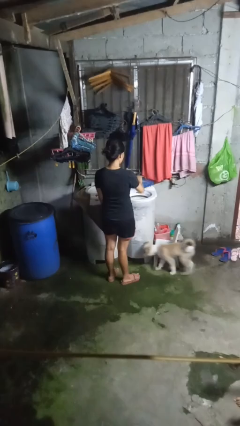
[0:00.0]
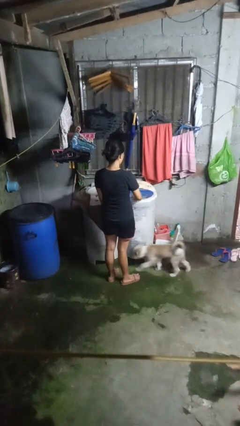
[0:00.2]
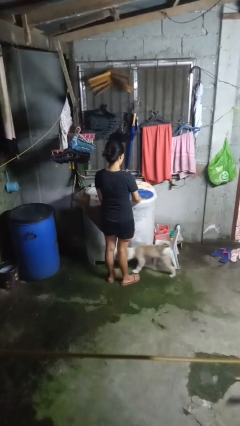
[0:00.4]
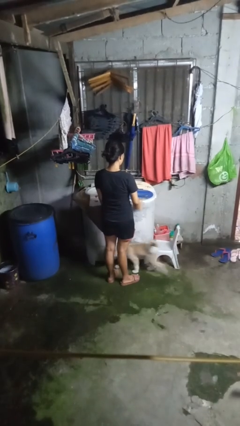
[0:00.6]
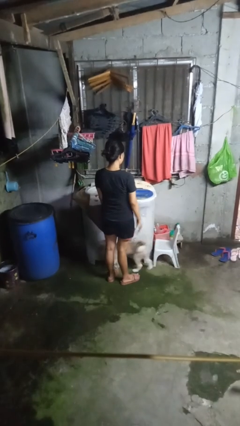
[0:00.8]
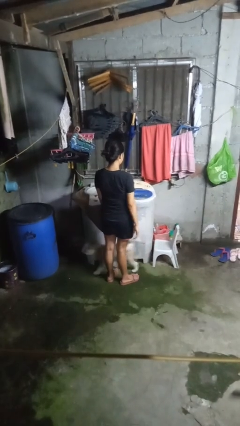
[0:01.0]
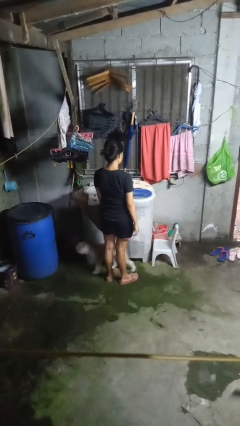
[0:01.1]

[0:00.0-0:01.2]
person closes clothes washer

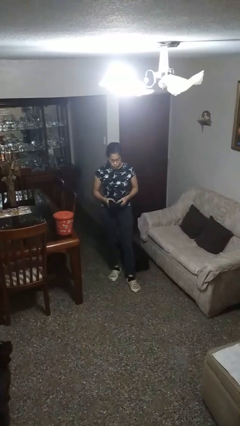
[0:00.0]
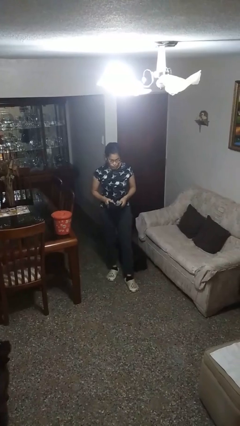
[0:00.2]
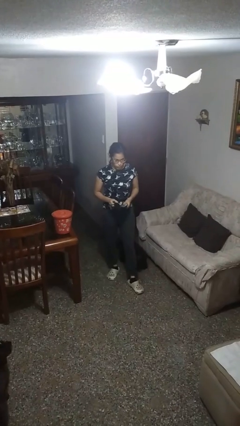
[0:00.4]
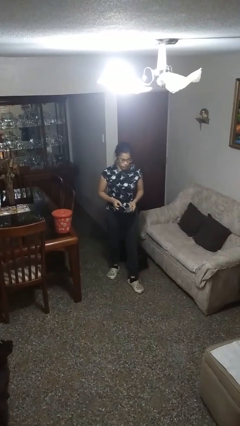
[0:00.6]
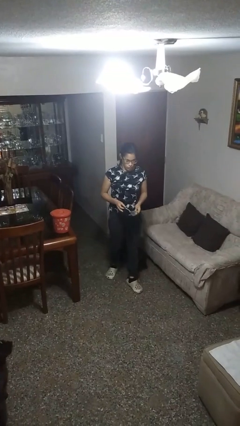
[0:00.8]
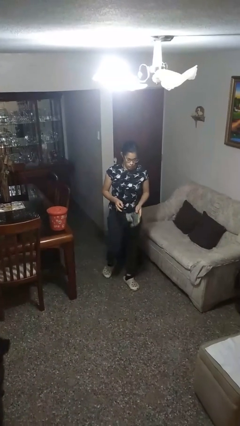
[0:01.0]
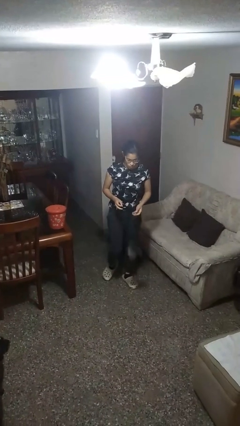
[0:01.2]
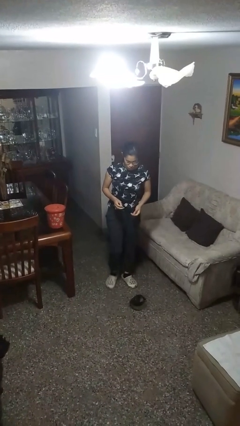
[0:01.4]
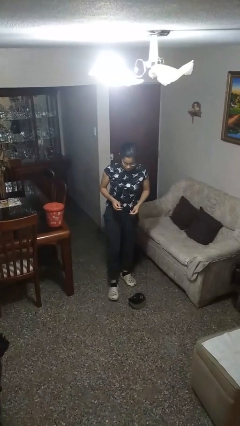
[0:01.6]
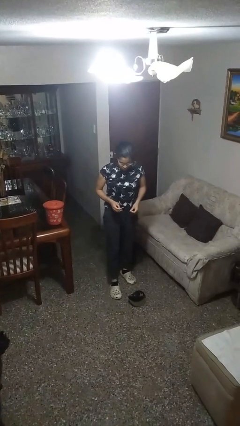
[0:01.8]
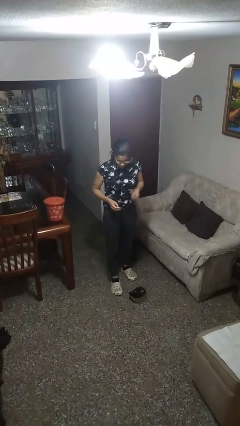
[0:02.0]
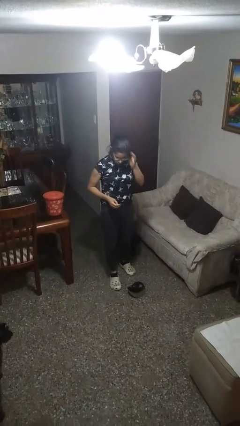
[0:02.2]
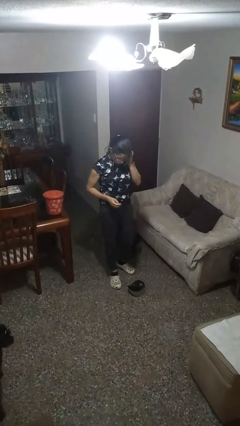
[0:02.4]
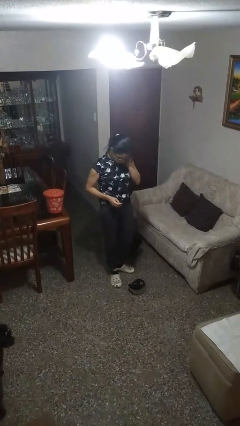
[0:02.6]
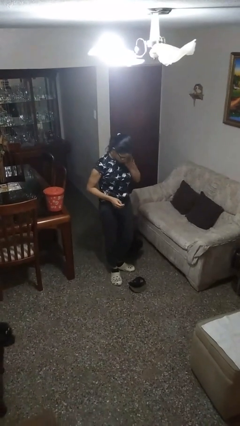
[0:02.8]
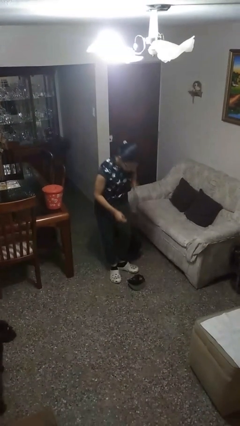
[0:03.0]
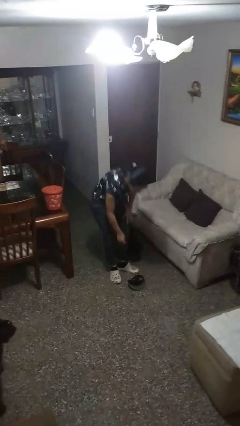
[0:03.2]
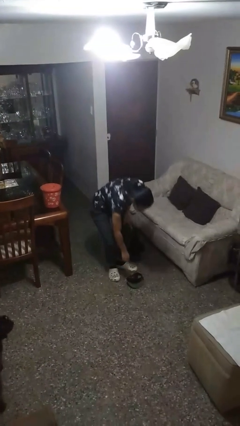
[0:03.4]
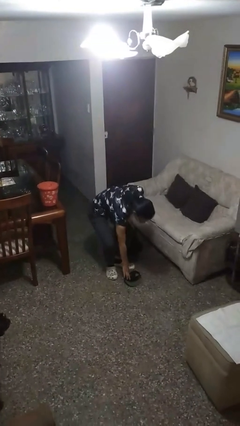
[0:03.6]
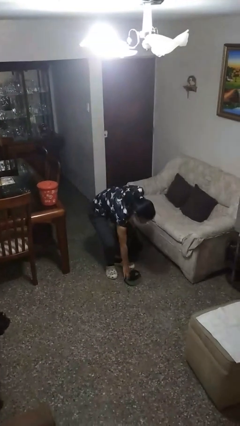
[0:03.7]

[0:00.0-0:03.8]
person drops object

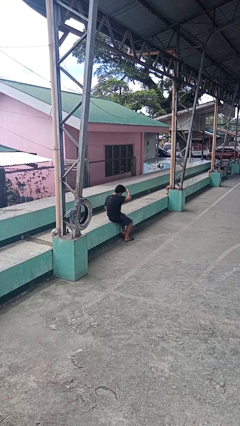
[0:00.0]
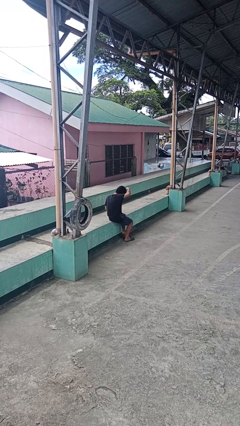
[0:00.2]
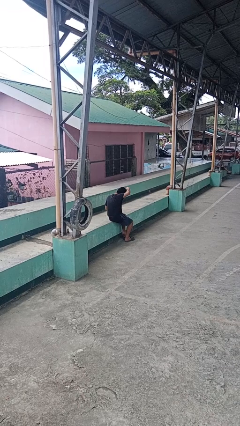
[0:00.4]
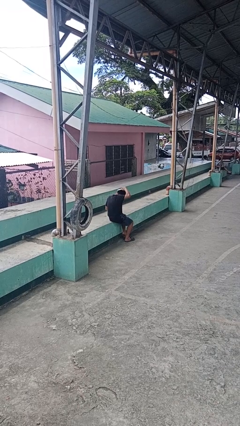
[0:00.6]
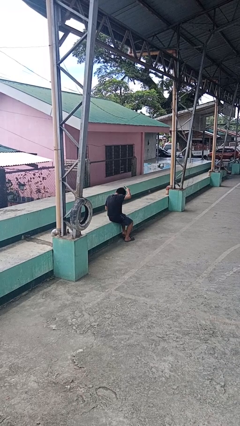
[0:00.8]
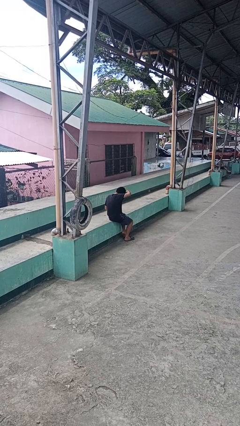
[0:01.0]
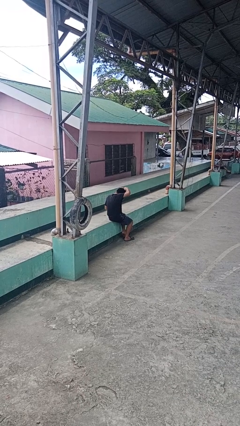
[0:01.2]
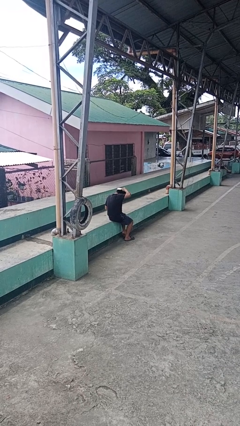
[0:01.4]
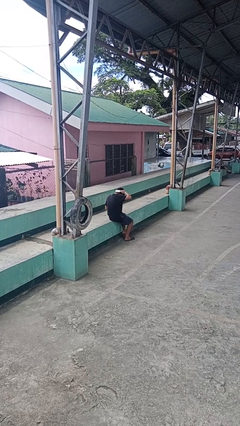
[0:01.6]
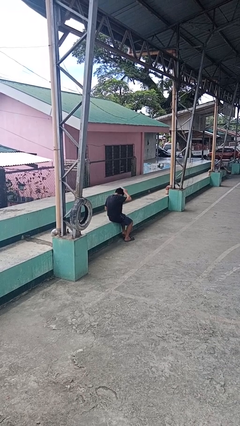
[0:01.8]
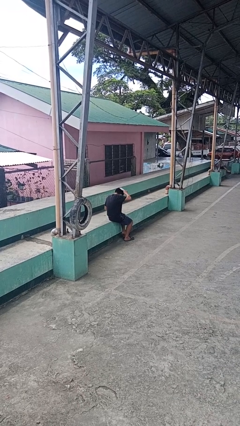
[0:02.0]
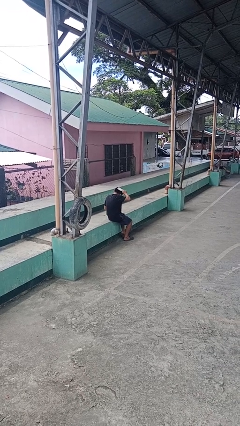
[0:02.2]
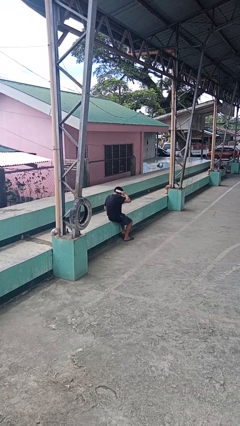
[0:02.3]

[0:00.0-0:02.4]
person brushes hair

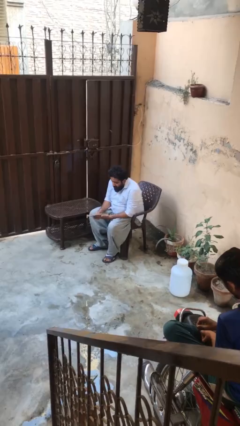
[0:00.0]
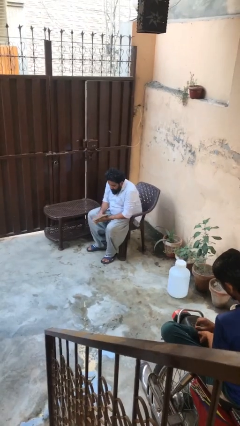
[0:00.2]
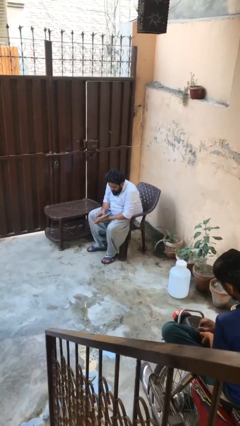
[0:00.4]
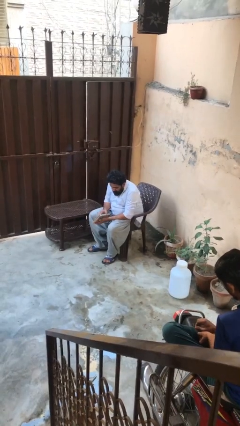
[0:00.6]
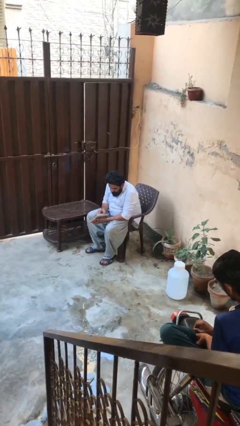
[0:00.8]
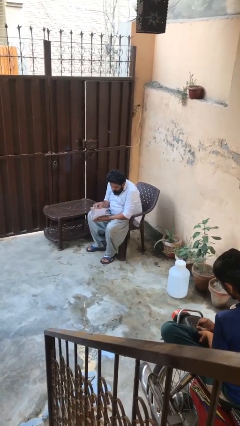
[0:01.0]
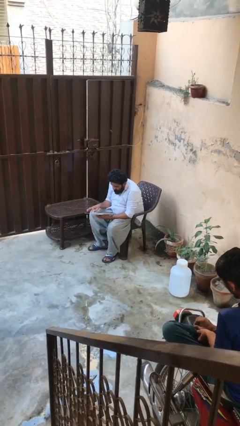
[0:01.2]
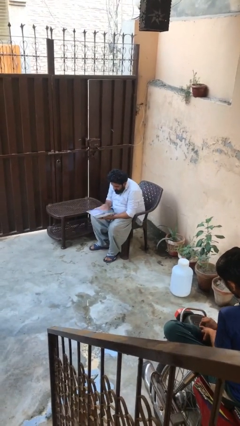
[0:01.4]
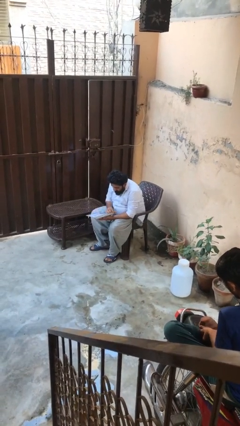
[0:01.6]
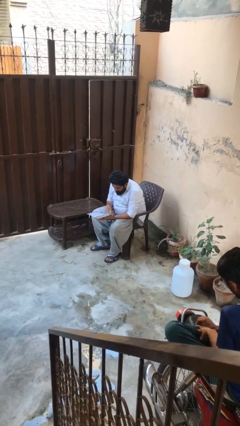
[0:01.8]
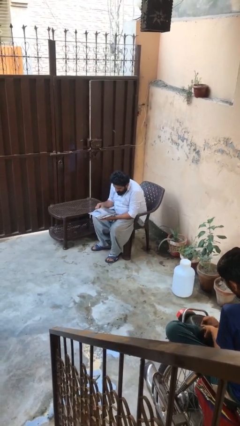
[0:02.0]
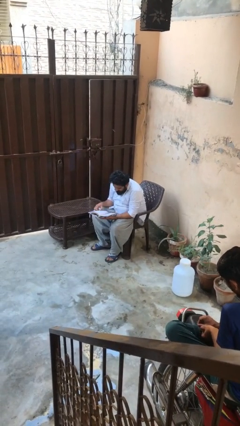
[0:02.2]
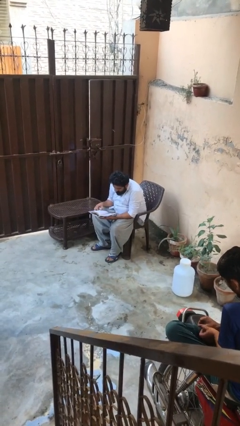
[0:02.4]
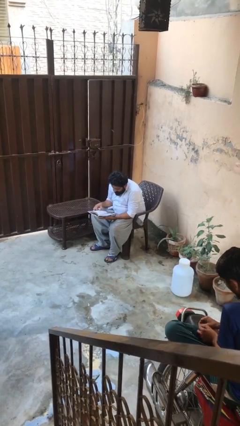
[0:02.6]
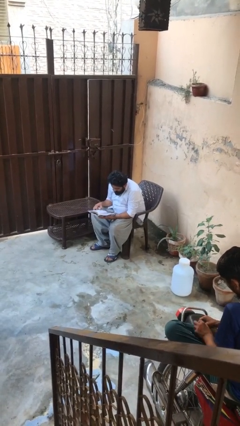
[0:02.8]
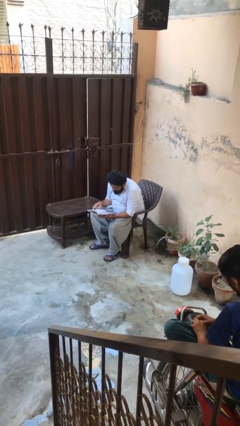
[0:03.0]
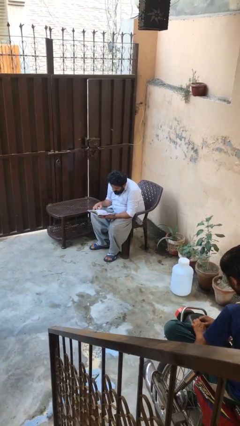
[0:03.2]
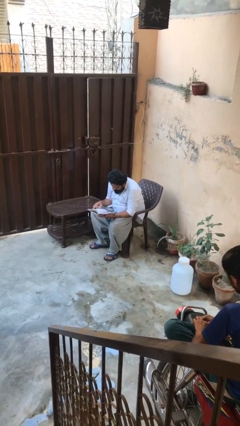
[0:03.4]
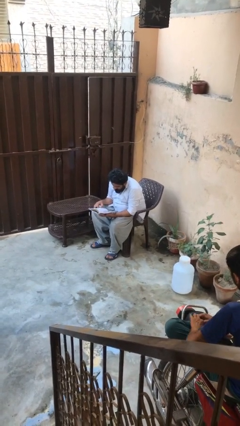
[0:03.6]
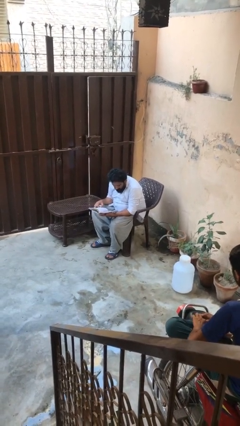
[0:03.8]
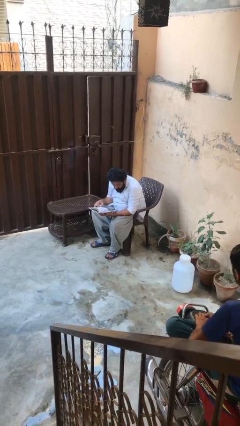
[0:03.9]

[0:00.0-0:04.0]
person reads document

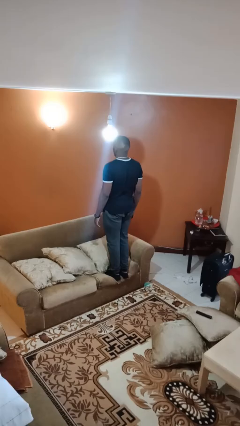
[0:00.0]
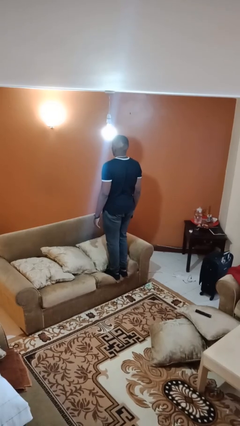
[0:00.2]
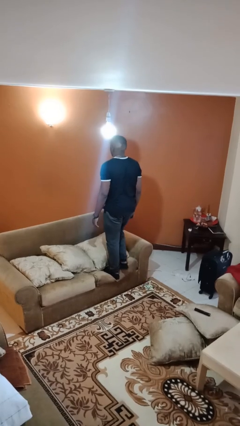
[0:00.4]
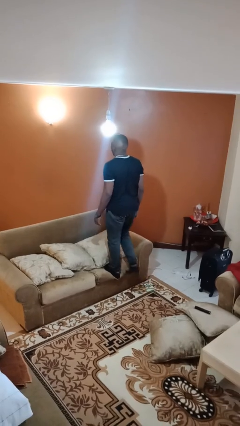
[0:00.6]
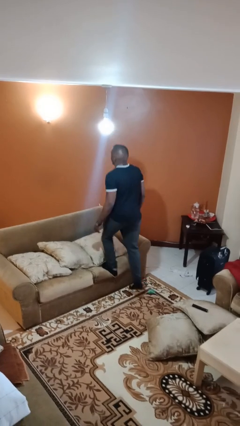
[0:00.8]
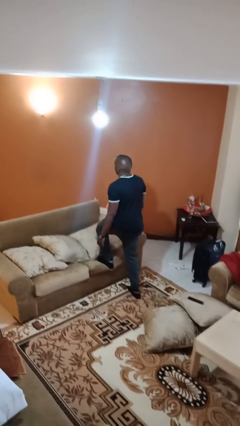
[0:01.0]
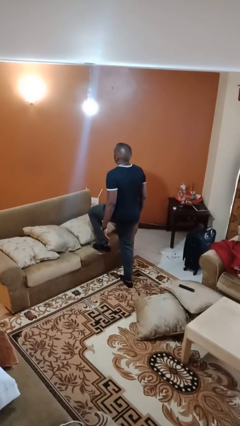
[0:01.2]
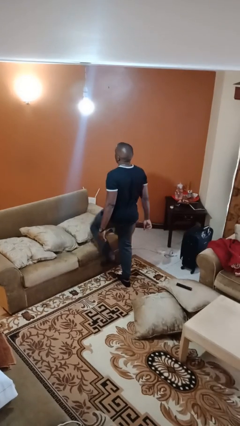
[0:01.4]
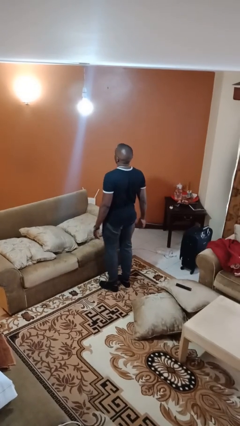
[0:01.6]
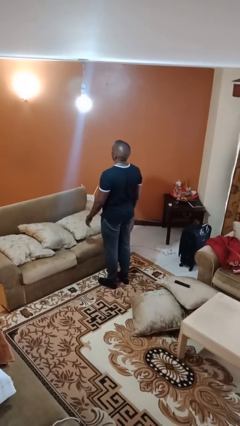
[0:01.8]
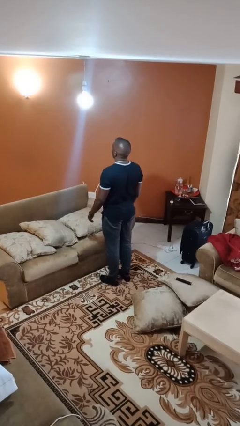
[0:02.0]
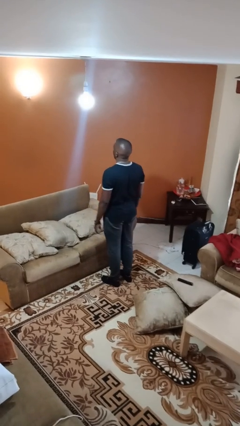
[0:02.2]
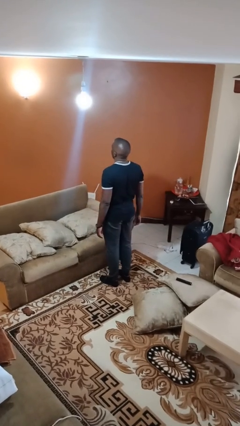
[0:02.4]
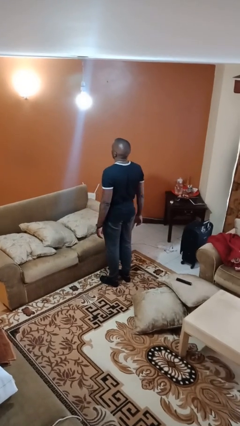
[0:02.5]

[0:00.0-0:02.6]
person climbs off couch

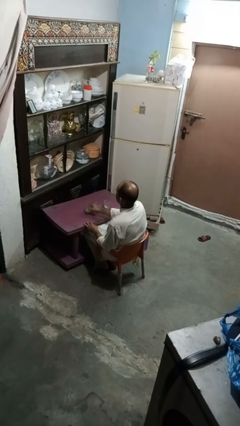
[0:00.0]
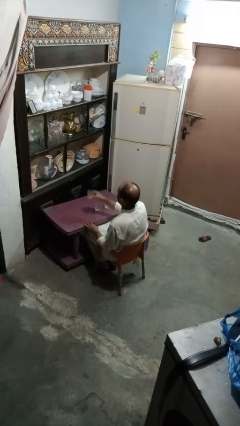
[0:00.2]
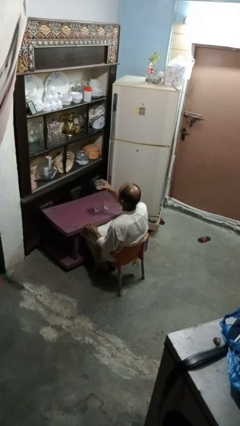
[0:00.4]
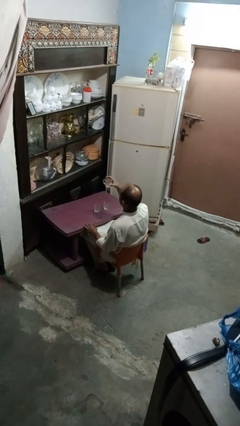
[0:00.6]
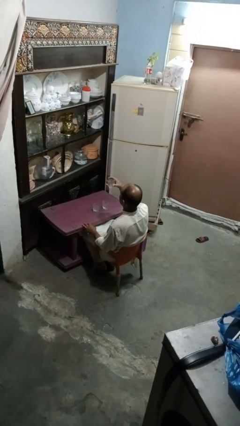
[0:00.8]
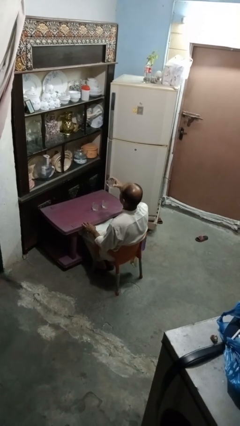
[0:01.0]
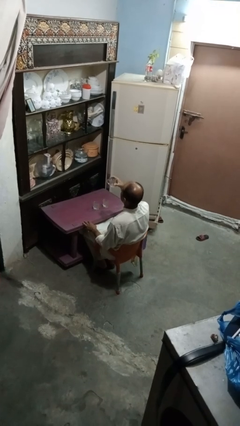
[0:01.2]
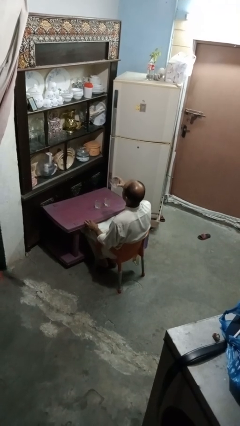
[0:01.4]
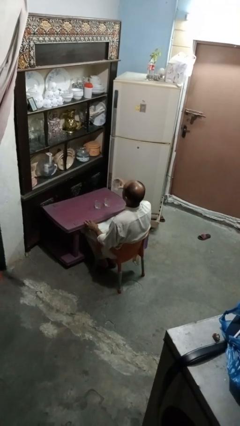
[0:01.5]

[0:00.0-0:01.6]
person picks up object from table

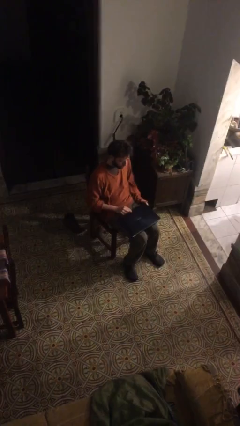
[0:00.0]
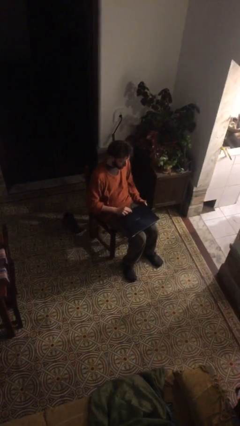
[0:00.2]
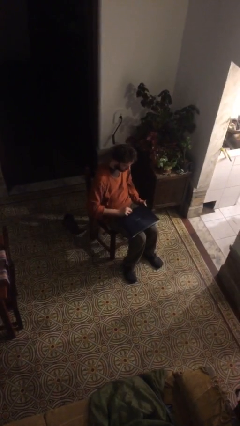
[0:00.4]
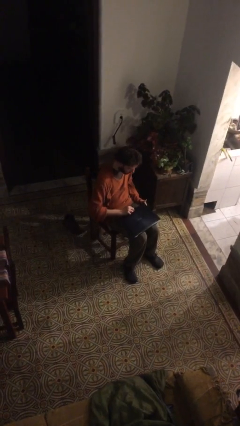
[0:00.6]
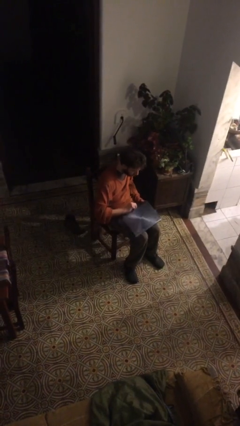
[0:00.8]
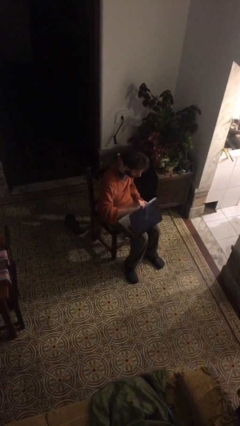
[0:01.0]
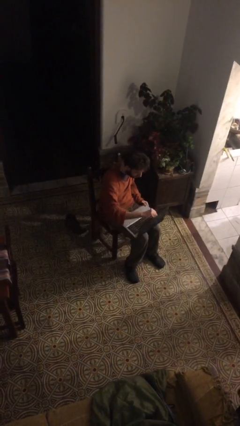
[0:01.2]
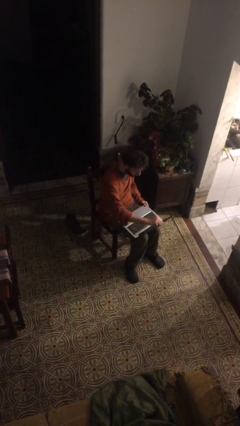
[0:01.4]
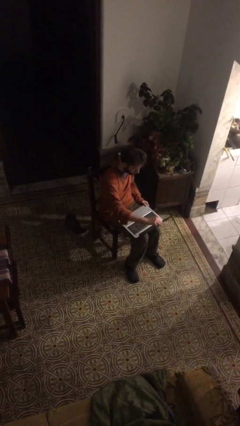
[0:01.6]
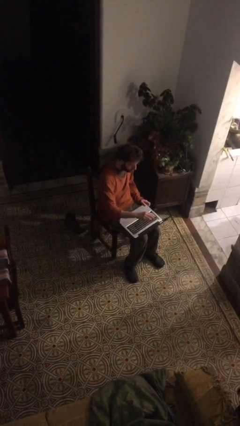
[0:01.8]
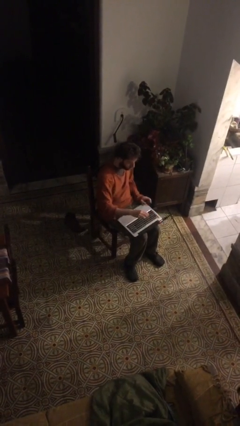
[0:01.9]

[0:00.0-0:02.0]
person opens laptop
